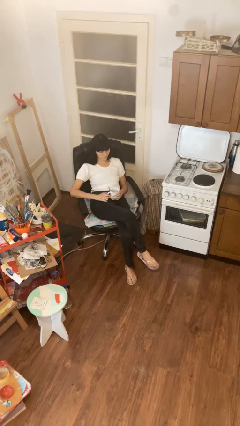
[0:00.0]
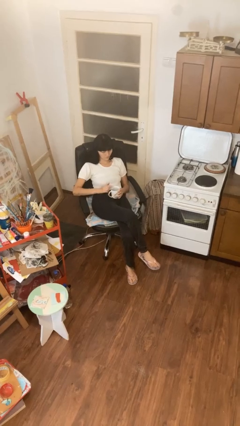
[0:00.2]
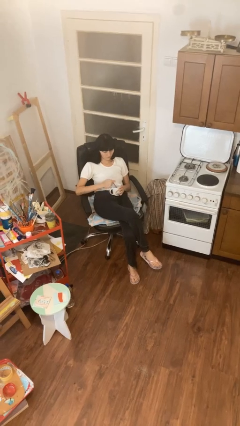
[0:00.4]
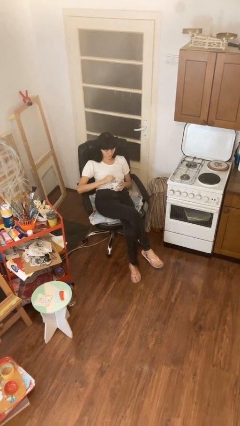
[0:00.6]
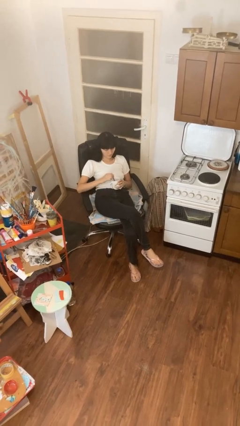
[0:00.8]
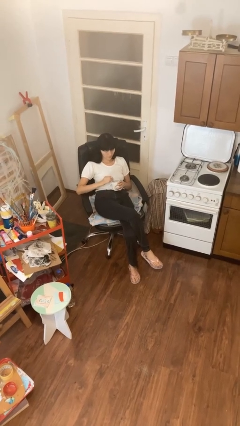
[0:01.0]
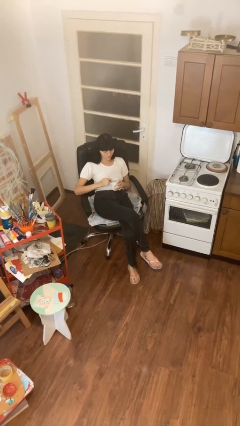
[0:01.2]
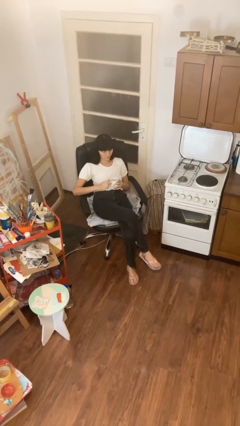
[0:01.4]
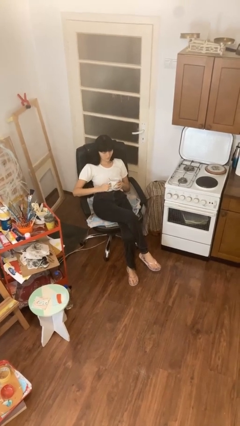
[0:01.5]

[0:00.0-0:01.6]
person stirs mug

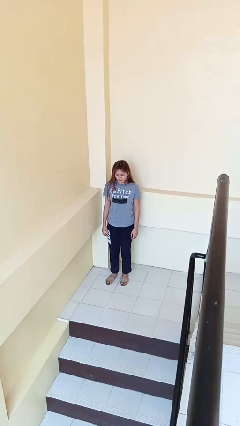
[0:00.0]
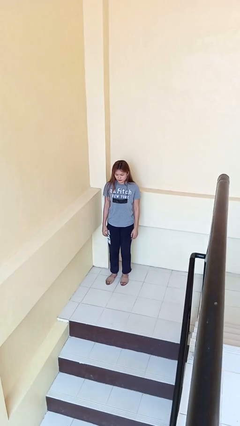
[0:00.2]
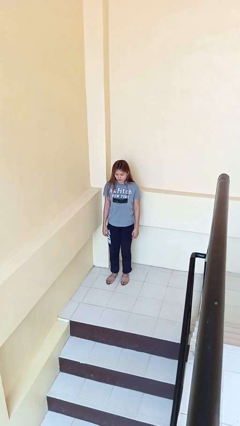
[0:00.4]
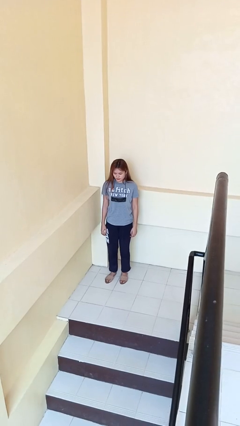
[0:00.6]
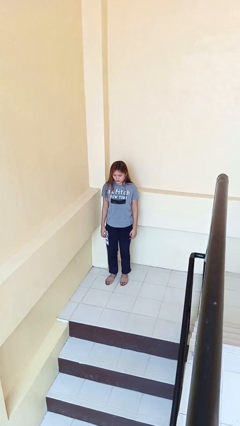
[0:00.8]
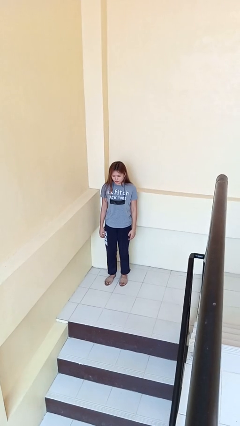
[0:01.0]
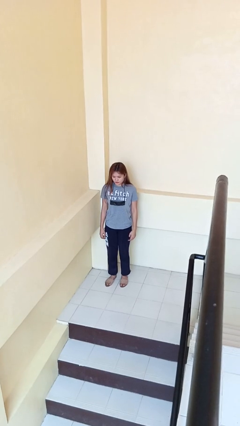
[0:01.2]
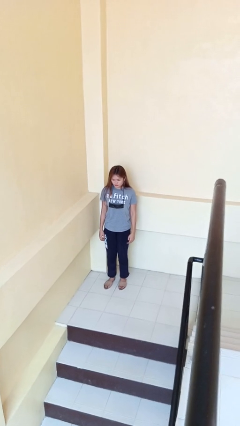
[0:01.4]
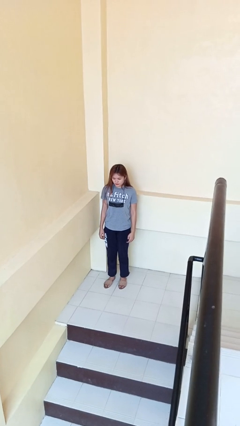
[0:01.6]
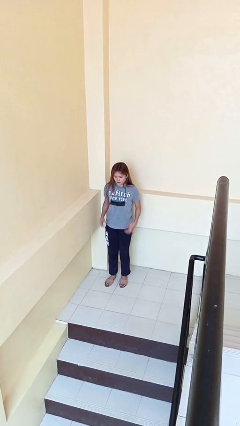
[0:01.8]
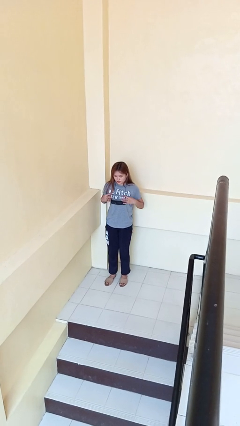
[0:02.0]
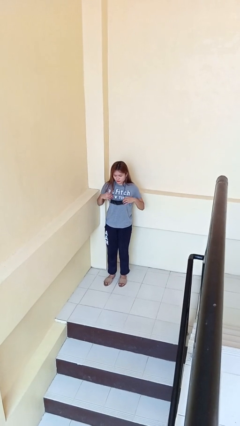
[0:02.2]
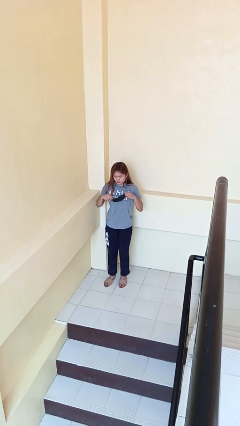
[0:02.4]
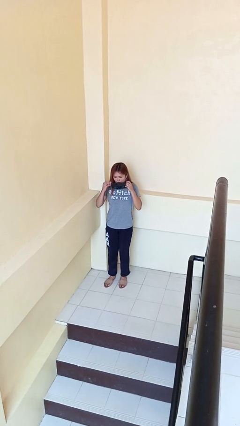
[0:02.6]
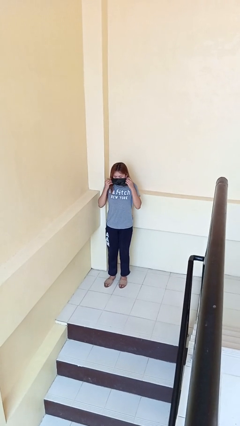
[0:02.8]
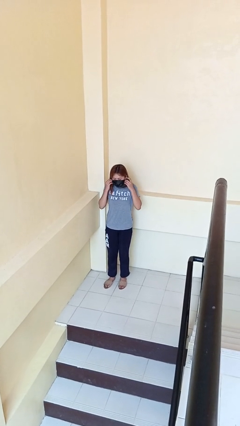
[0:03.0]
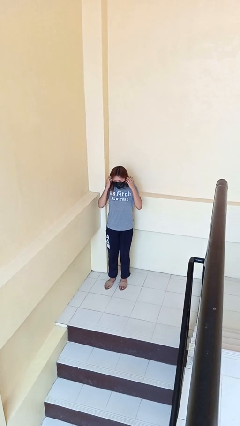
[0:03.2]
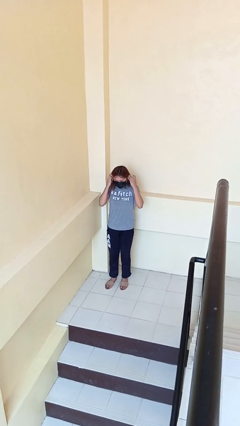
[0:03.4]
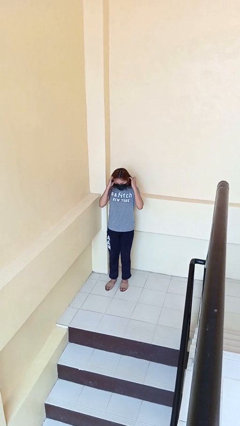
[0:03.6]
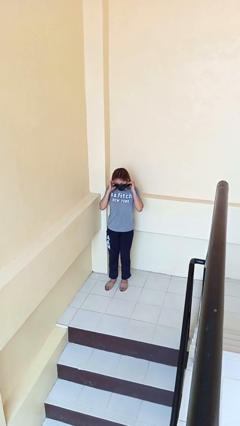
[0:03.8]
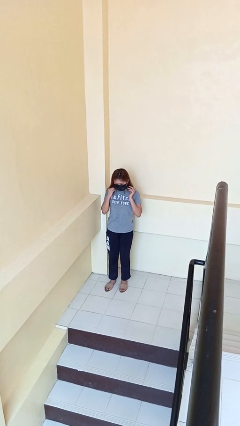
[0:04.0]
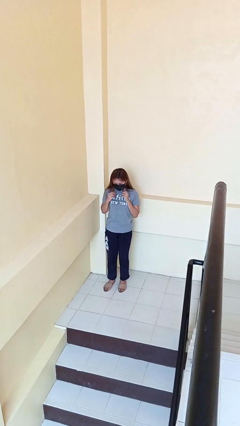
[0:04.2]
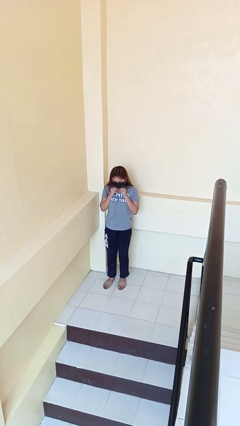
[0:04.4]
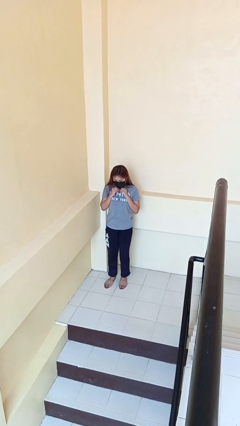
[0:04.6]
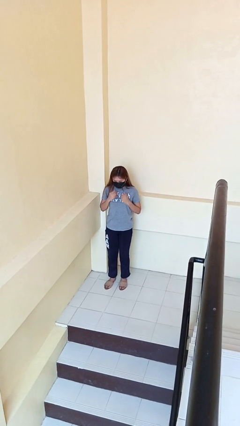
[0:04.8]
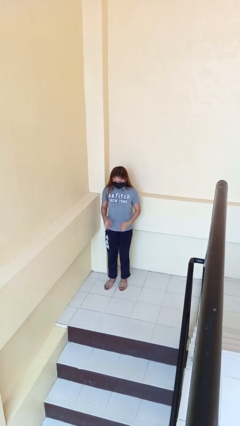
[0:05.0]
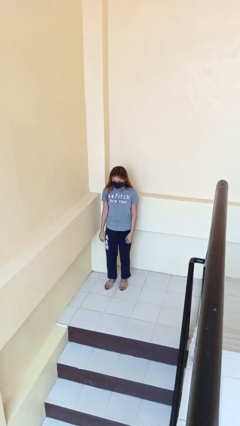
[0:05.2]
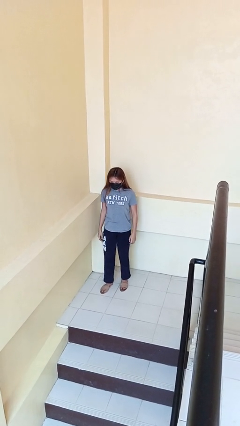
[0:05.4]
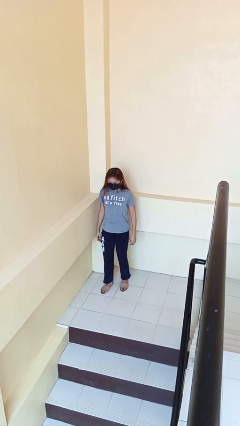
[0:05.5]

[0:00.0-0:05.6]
person puts on facemask

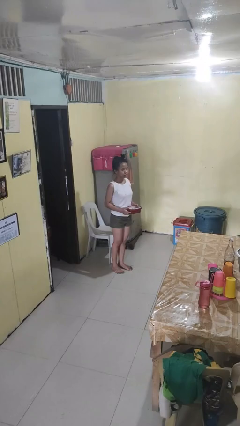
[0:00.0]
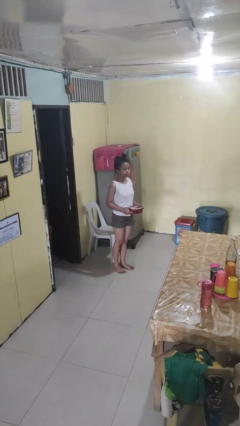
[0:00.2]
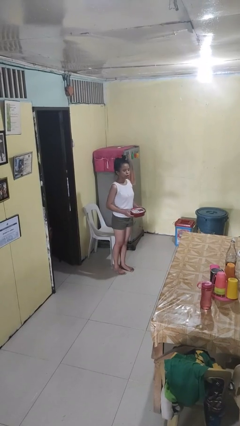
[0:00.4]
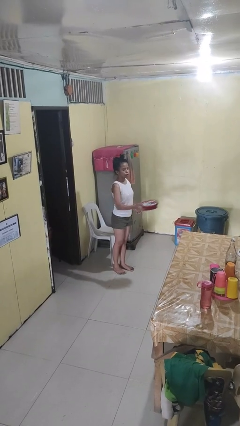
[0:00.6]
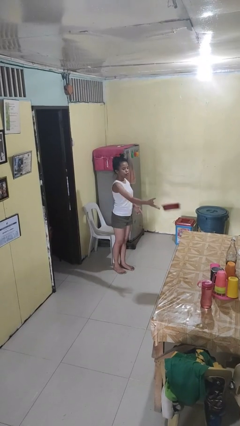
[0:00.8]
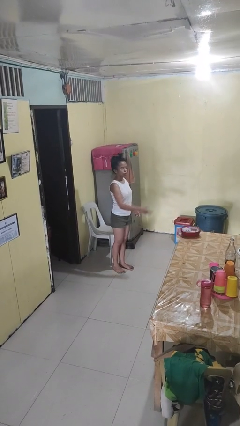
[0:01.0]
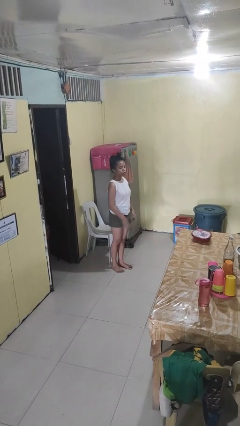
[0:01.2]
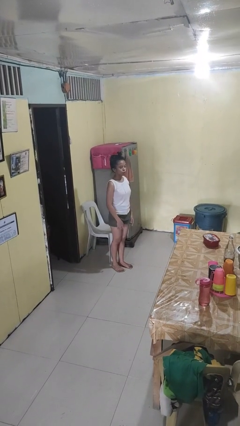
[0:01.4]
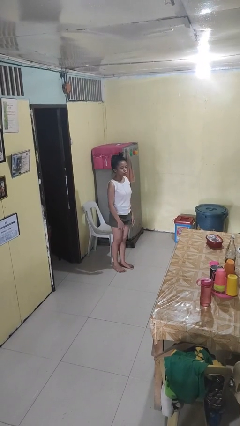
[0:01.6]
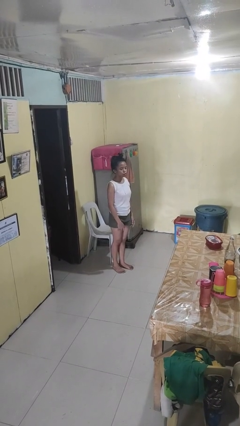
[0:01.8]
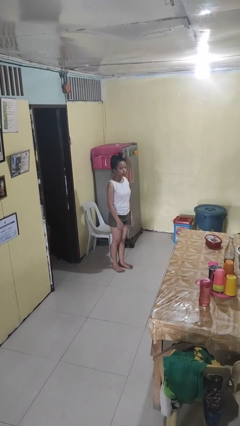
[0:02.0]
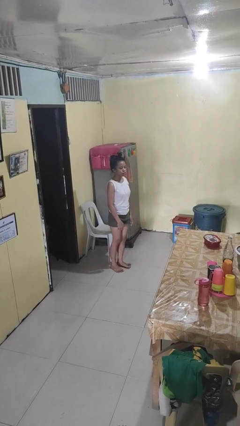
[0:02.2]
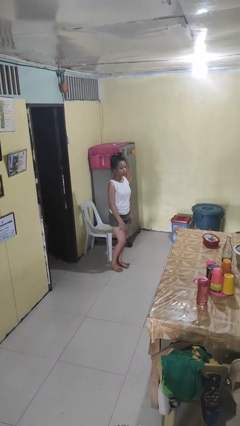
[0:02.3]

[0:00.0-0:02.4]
person throws object on table

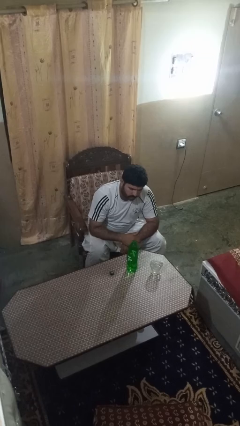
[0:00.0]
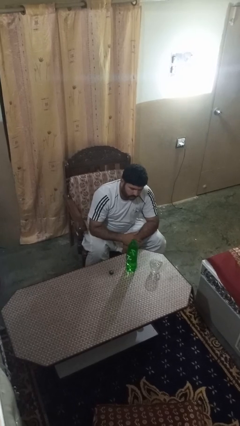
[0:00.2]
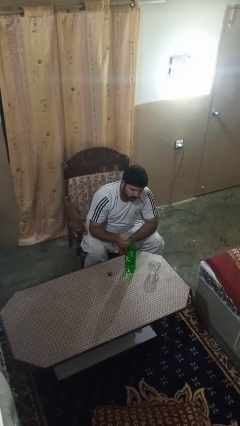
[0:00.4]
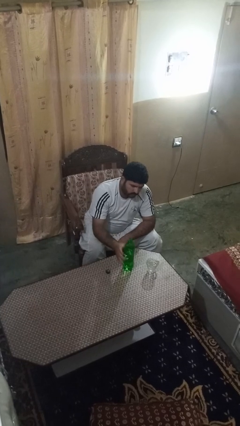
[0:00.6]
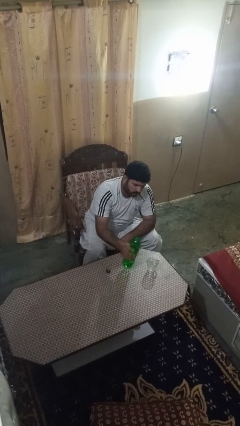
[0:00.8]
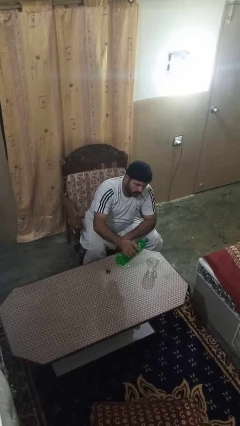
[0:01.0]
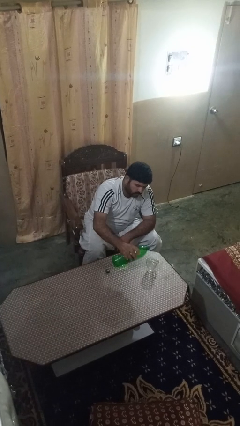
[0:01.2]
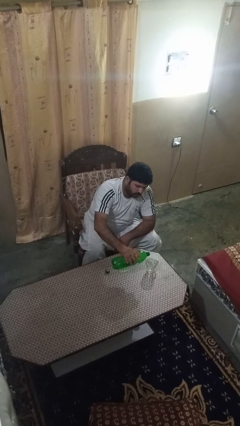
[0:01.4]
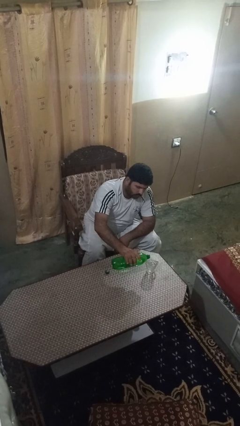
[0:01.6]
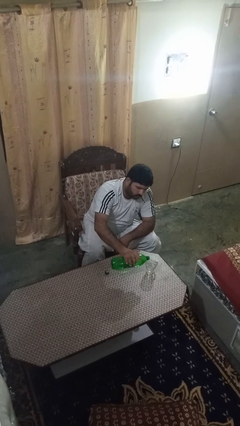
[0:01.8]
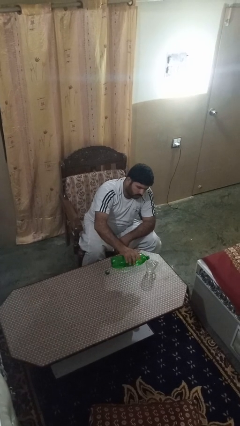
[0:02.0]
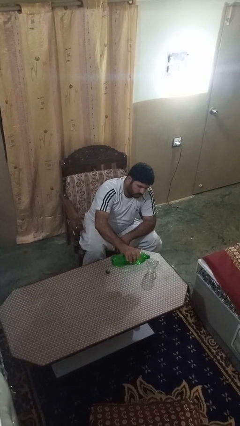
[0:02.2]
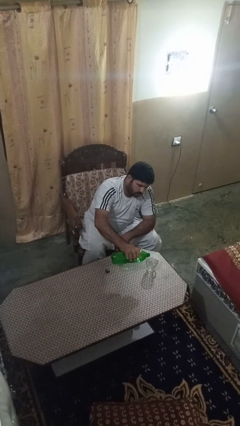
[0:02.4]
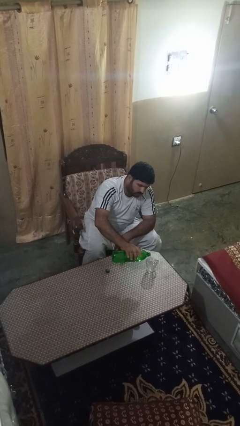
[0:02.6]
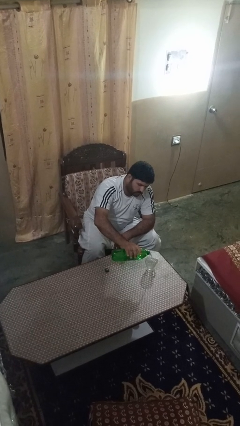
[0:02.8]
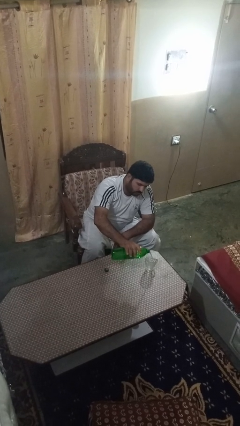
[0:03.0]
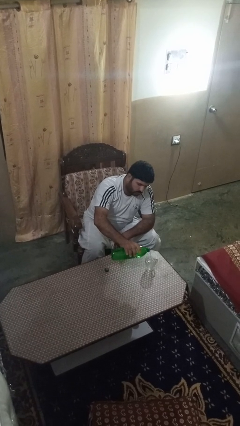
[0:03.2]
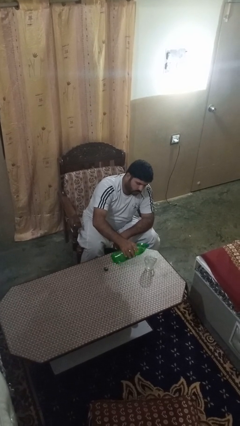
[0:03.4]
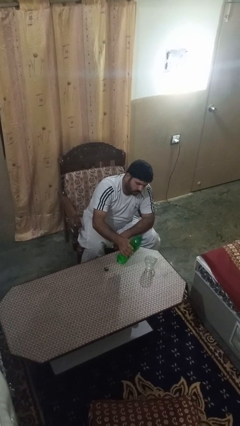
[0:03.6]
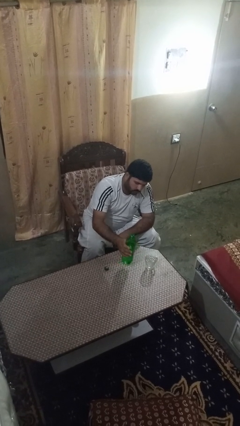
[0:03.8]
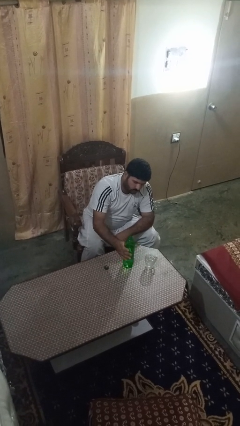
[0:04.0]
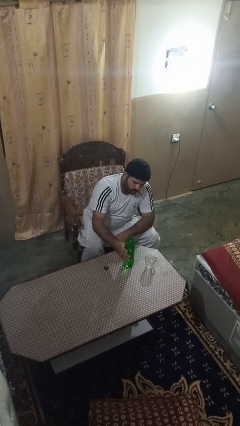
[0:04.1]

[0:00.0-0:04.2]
person pours liquid into cup

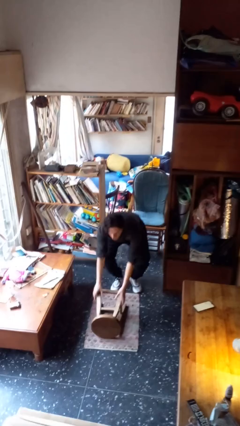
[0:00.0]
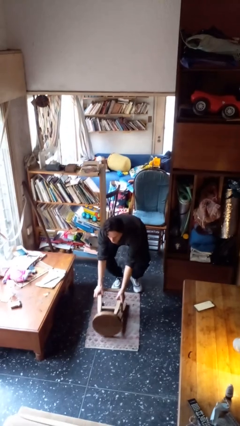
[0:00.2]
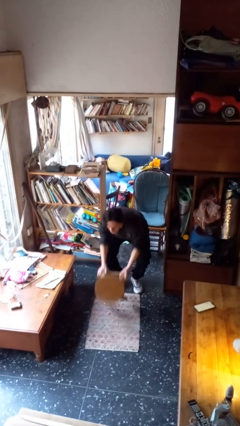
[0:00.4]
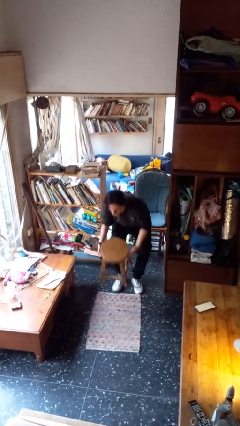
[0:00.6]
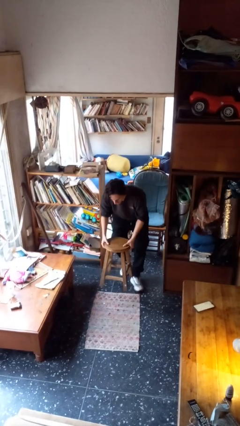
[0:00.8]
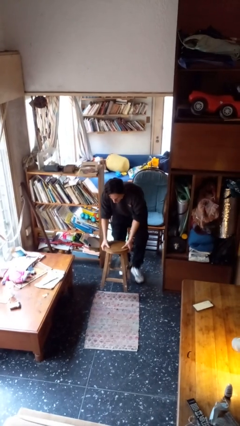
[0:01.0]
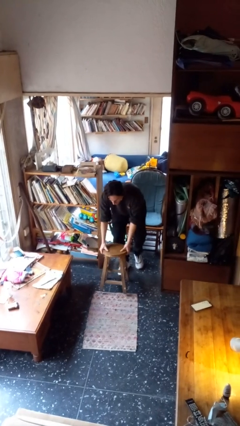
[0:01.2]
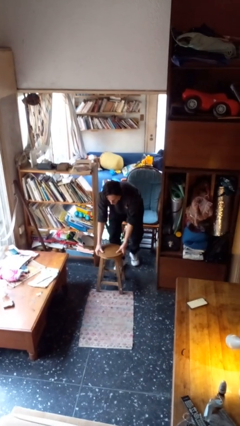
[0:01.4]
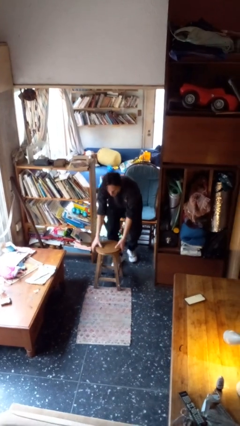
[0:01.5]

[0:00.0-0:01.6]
person sets upright furniture

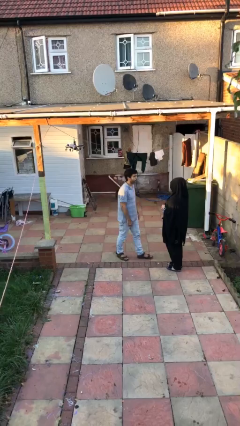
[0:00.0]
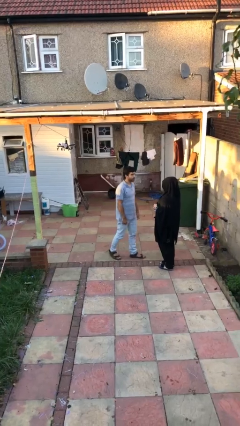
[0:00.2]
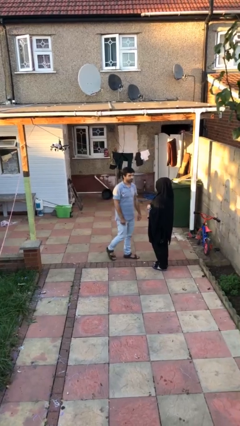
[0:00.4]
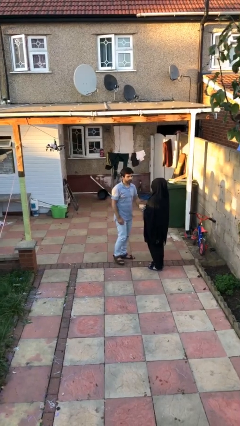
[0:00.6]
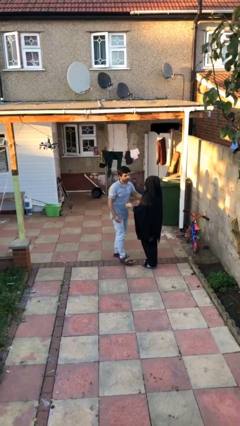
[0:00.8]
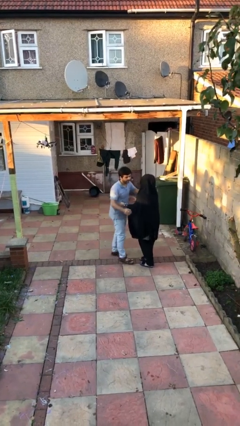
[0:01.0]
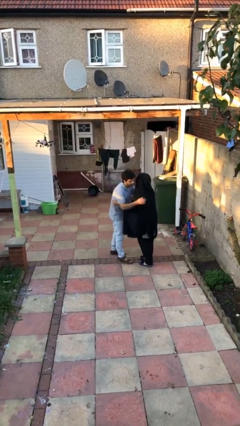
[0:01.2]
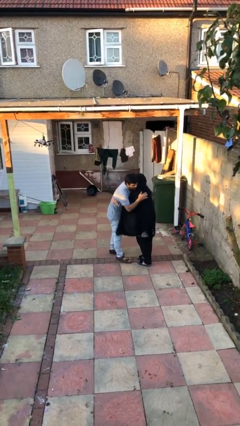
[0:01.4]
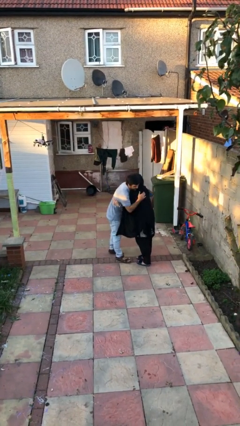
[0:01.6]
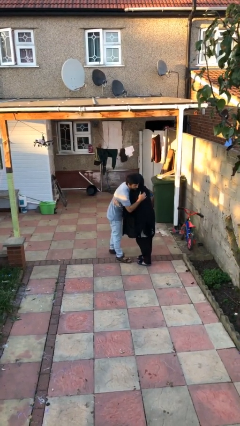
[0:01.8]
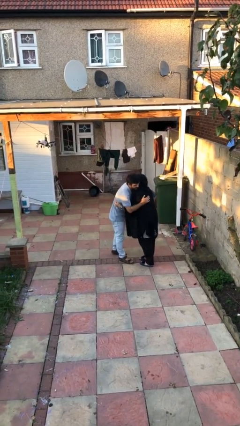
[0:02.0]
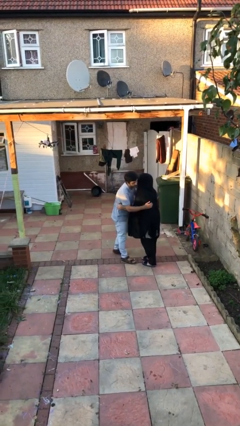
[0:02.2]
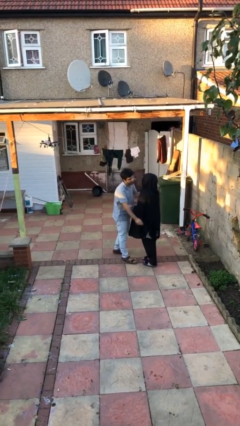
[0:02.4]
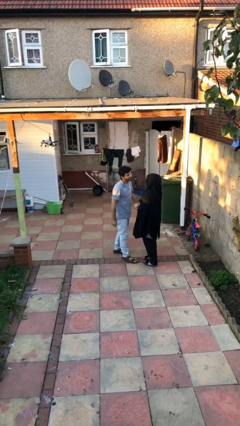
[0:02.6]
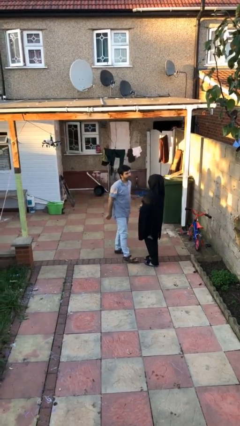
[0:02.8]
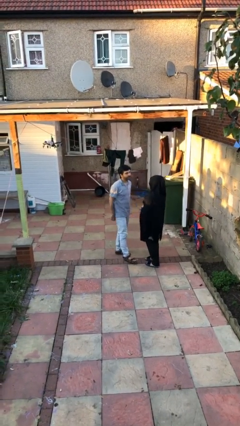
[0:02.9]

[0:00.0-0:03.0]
person embraces person
